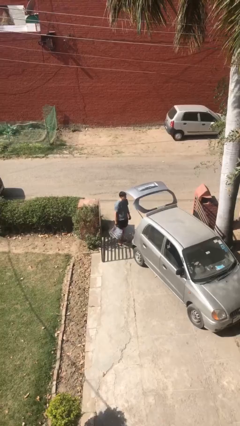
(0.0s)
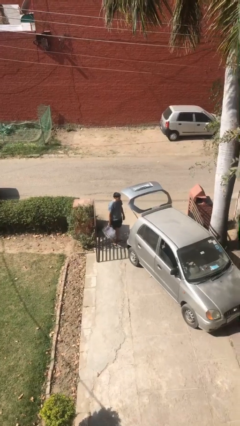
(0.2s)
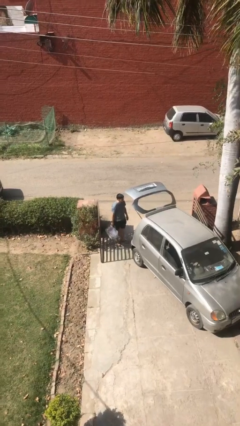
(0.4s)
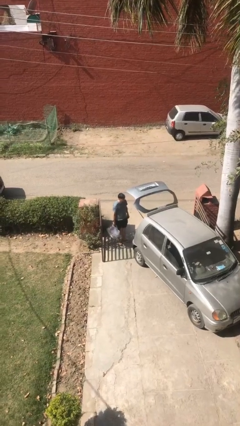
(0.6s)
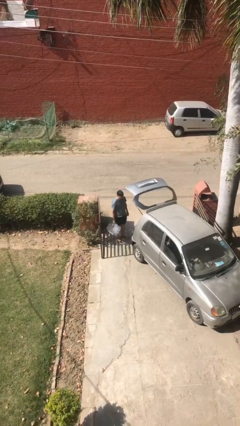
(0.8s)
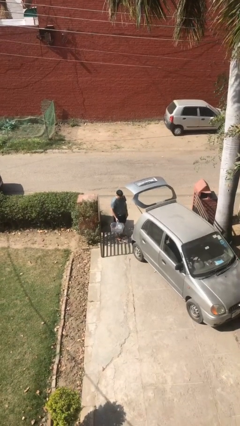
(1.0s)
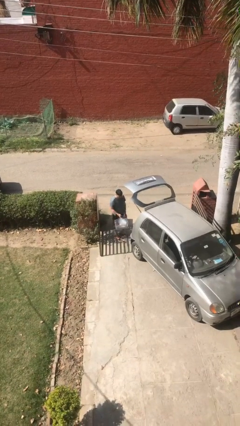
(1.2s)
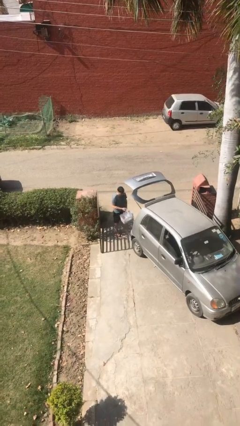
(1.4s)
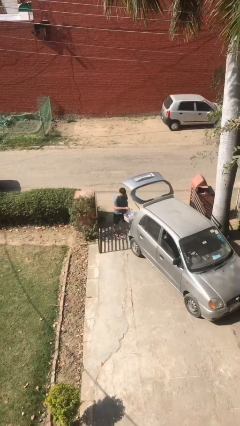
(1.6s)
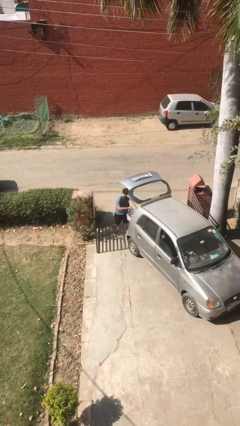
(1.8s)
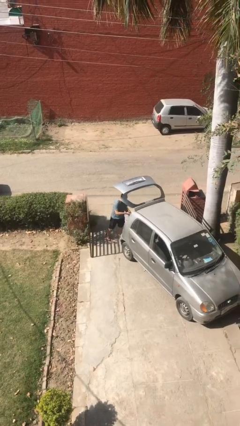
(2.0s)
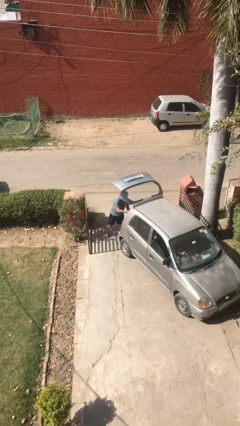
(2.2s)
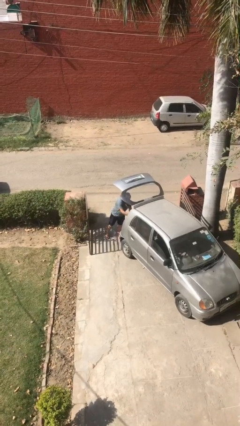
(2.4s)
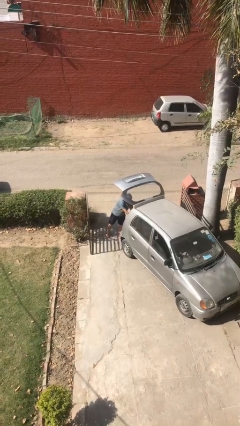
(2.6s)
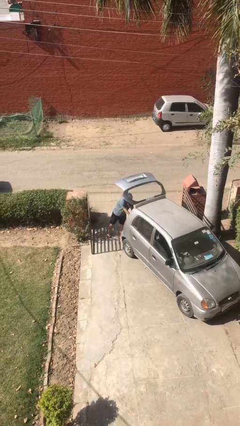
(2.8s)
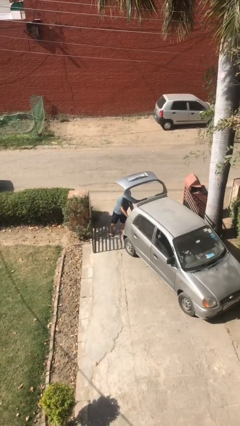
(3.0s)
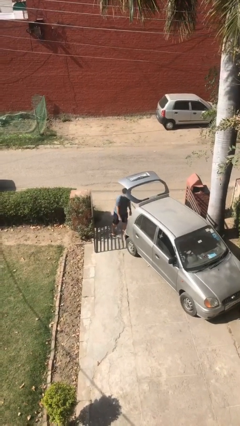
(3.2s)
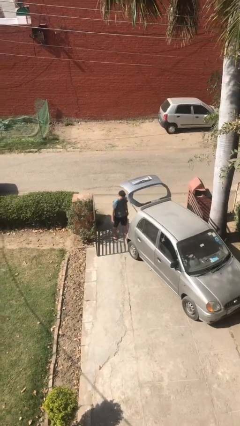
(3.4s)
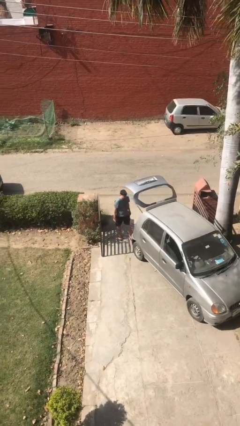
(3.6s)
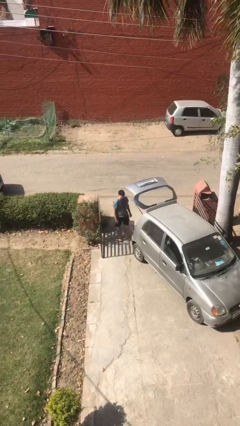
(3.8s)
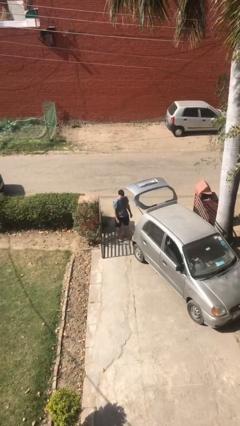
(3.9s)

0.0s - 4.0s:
person loads car

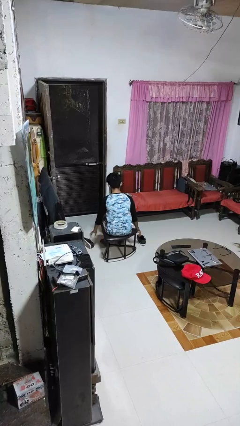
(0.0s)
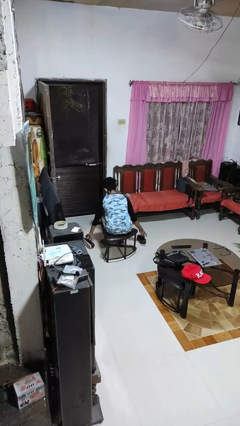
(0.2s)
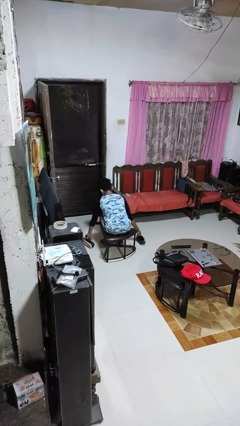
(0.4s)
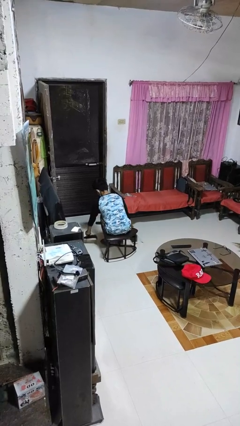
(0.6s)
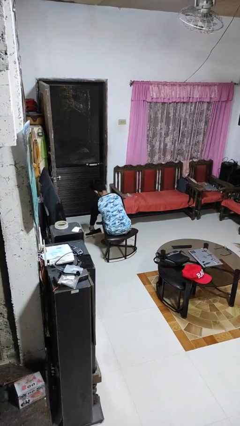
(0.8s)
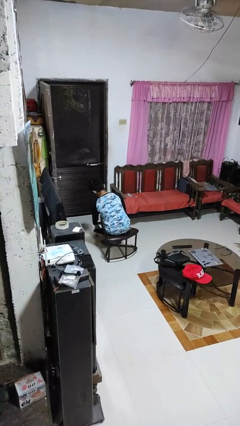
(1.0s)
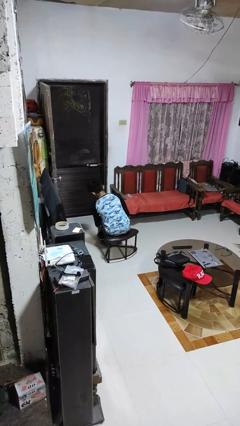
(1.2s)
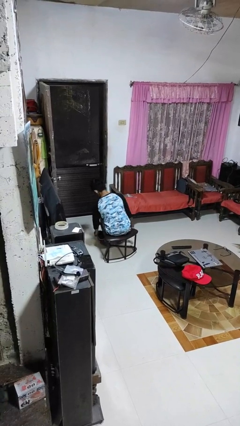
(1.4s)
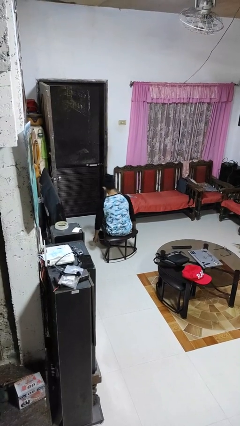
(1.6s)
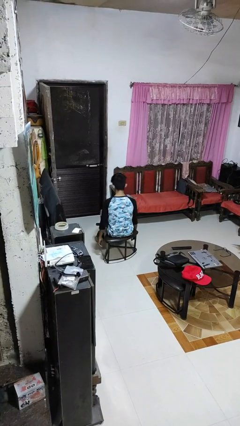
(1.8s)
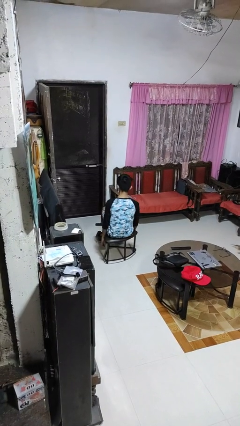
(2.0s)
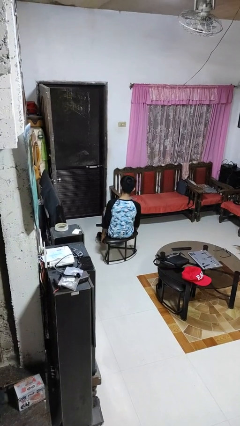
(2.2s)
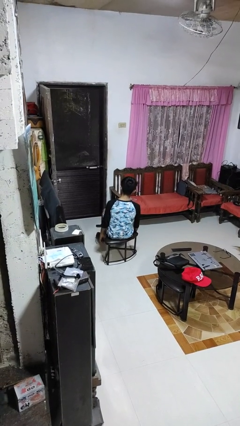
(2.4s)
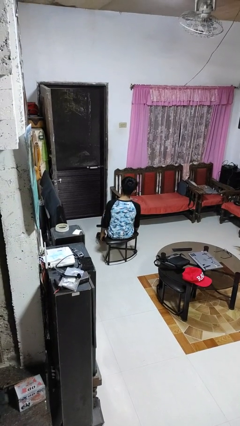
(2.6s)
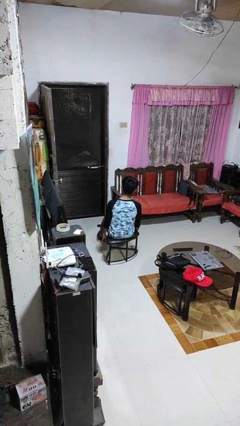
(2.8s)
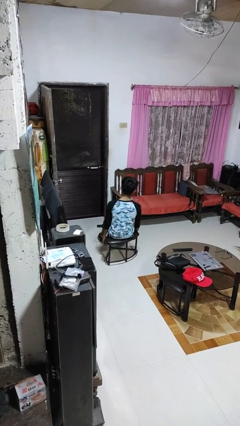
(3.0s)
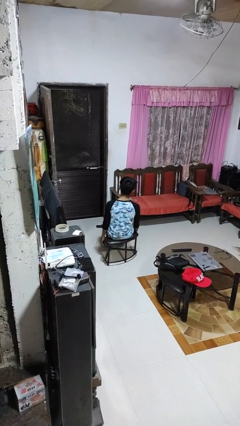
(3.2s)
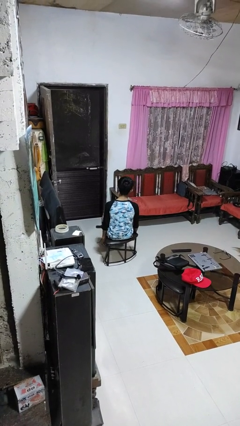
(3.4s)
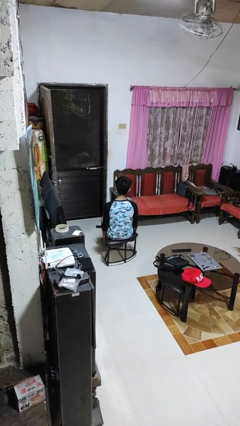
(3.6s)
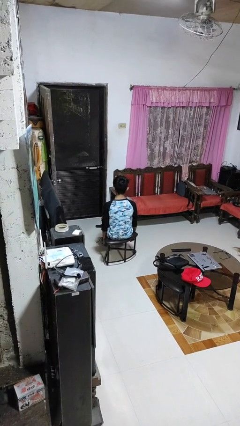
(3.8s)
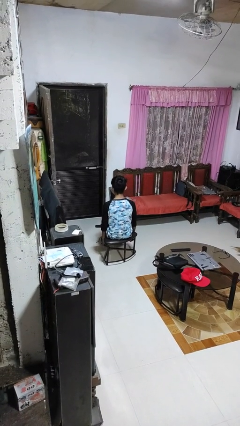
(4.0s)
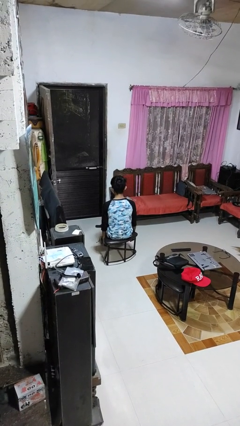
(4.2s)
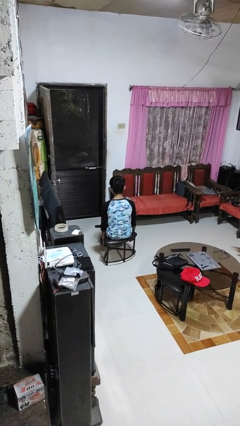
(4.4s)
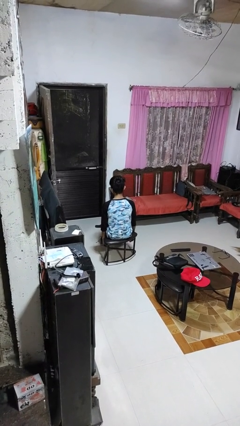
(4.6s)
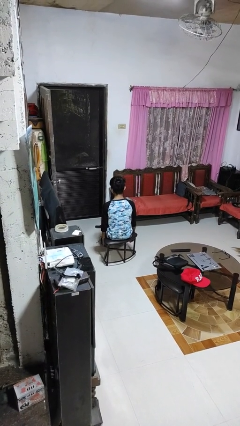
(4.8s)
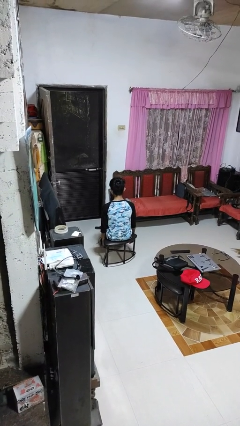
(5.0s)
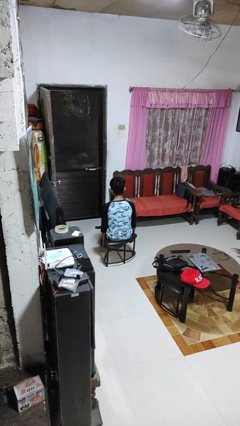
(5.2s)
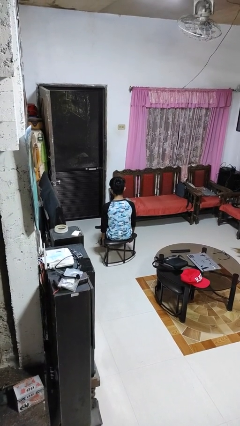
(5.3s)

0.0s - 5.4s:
person puts on shoes

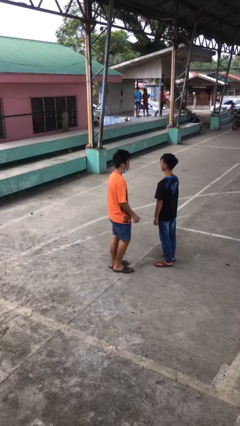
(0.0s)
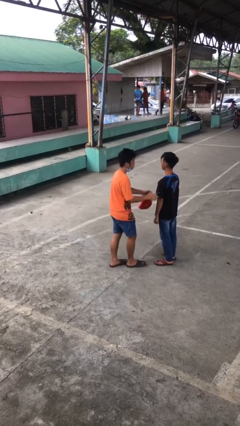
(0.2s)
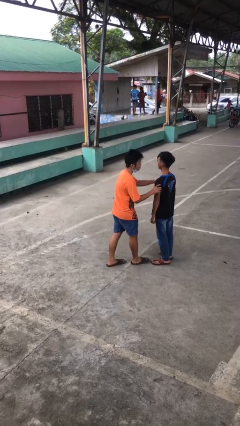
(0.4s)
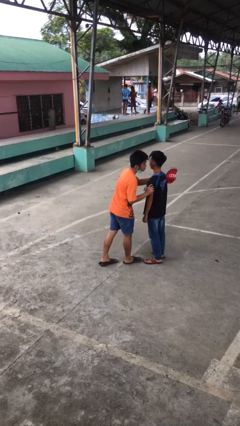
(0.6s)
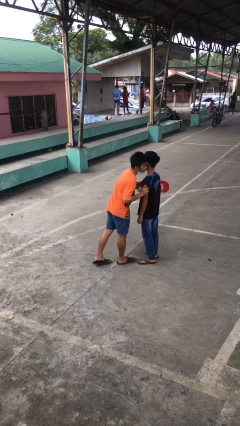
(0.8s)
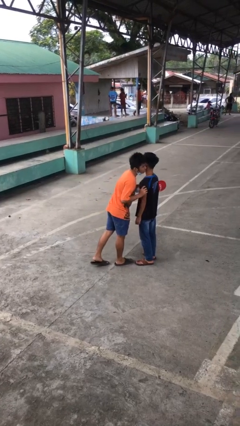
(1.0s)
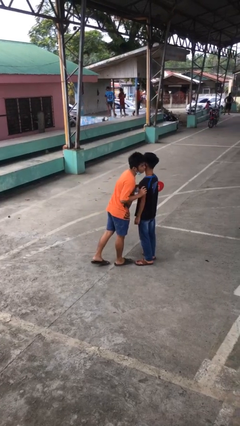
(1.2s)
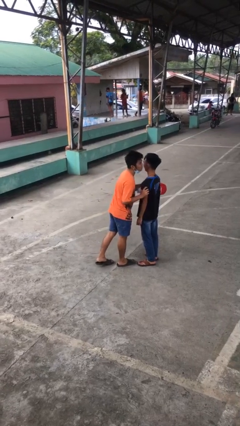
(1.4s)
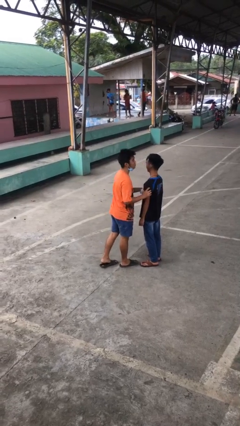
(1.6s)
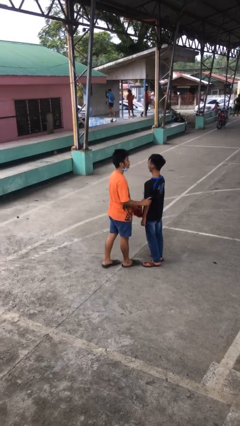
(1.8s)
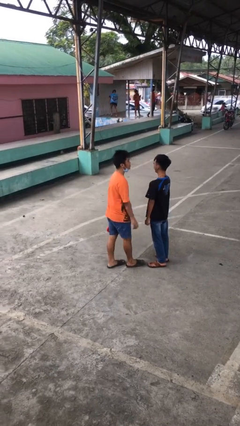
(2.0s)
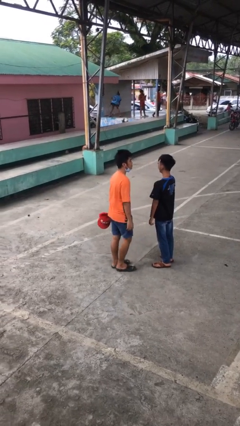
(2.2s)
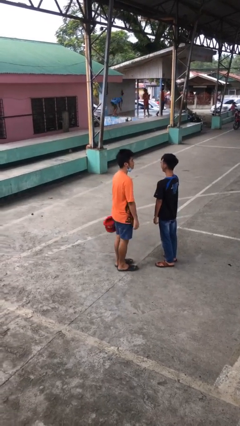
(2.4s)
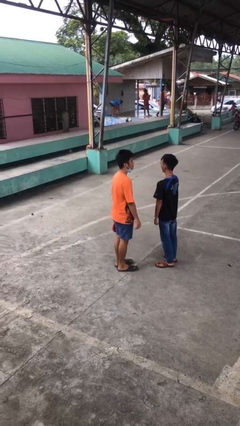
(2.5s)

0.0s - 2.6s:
person kisses cheek of person

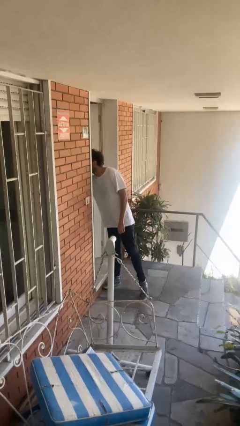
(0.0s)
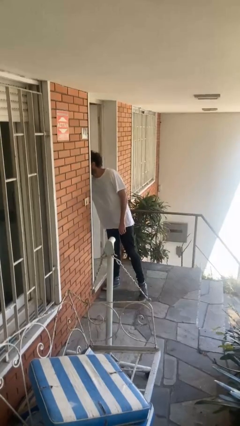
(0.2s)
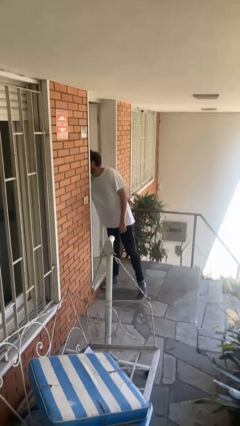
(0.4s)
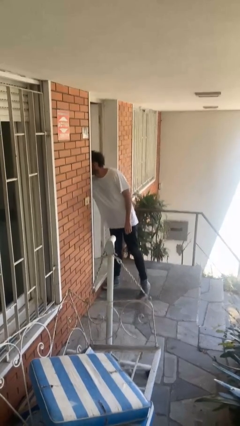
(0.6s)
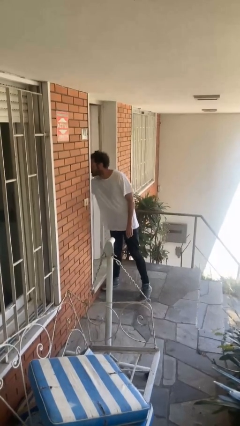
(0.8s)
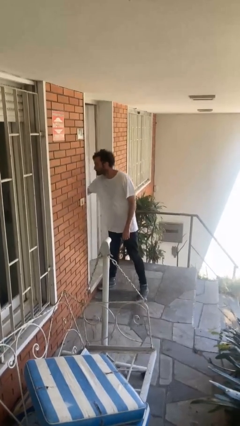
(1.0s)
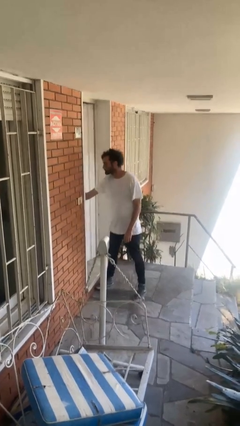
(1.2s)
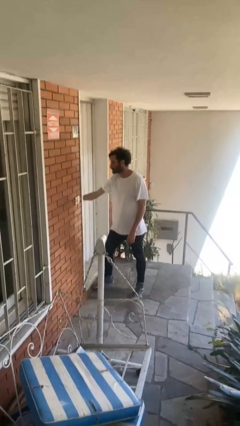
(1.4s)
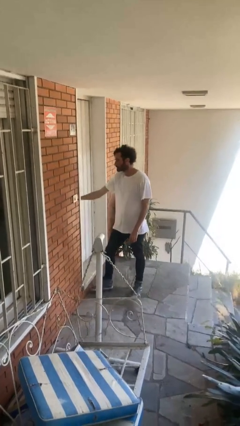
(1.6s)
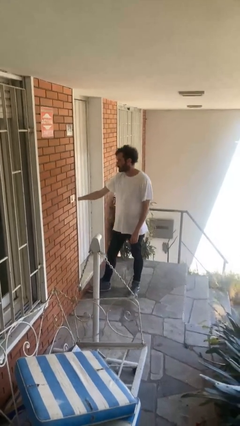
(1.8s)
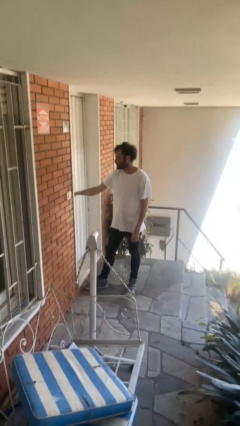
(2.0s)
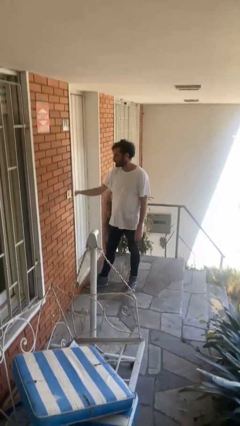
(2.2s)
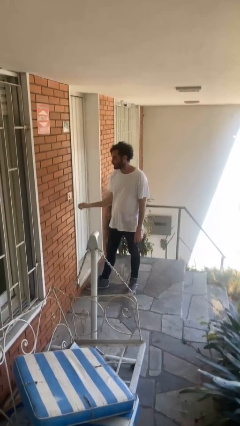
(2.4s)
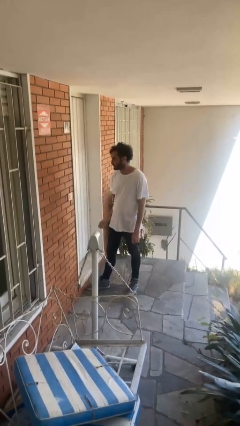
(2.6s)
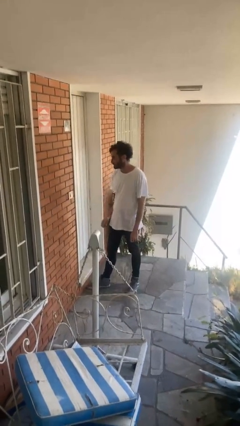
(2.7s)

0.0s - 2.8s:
person closes facility door

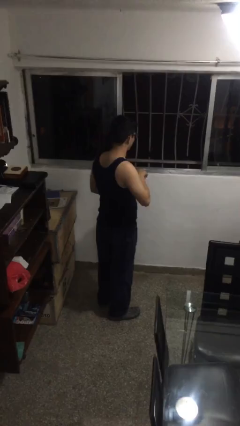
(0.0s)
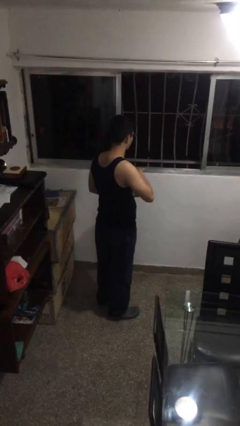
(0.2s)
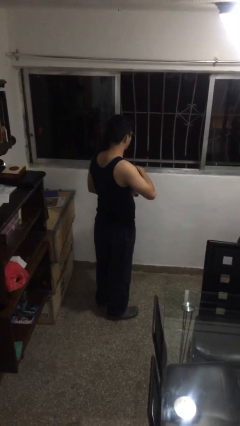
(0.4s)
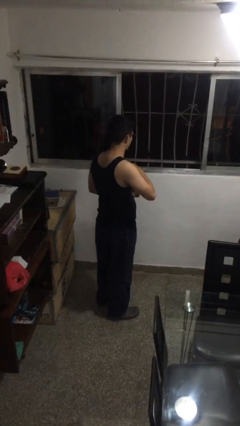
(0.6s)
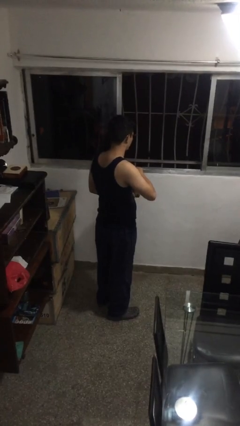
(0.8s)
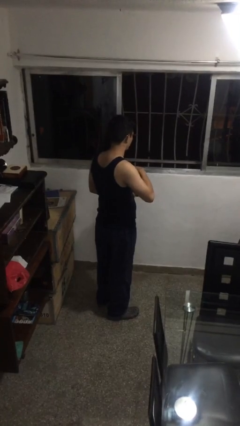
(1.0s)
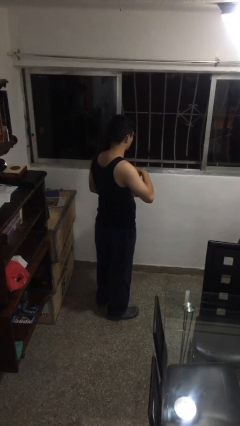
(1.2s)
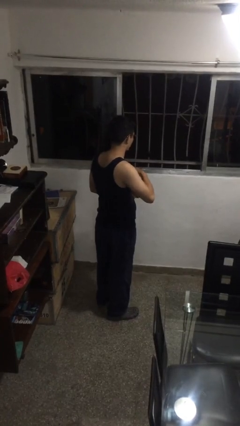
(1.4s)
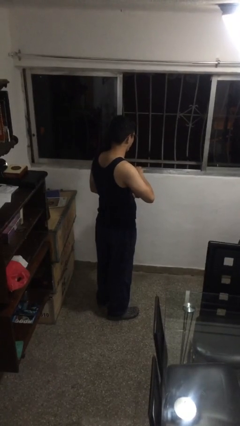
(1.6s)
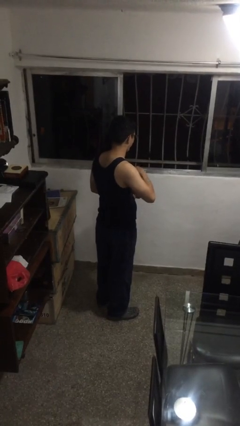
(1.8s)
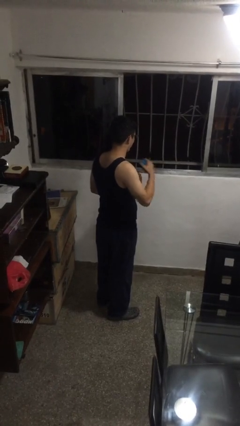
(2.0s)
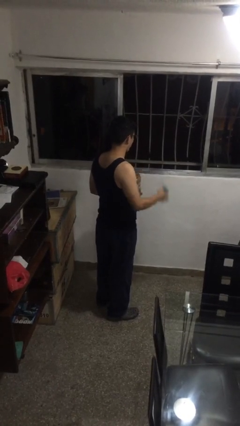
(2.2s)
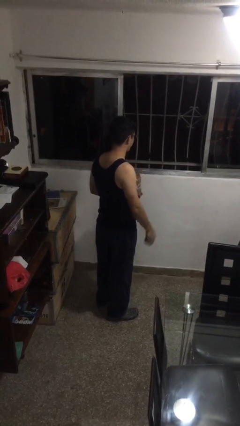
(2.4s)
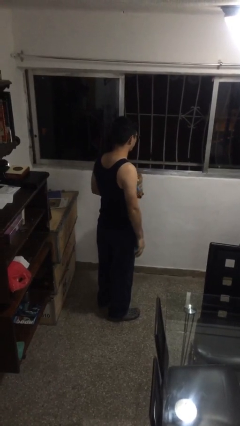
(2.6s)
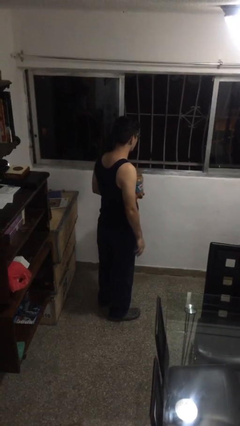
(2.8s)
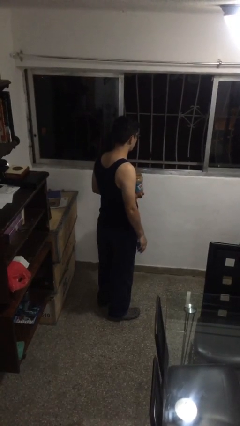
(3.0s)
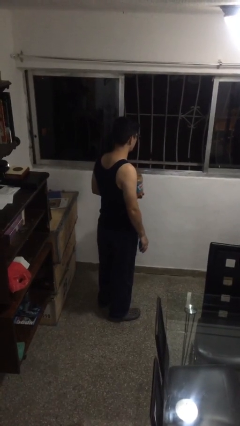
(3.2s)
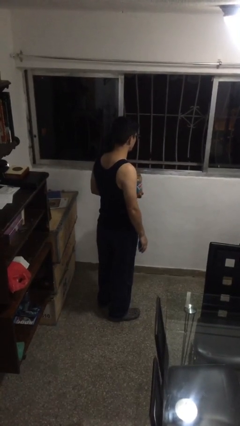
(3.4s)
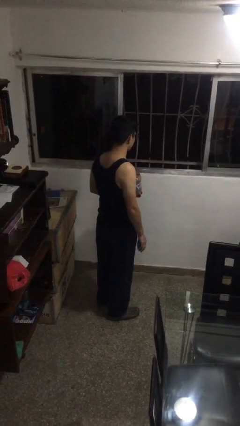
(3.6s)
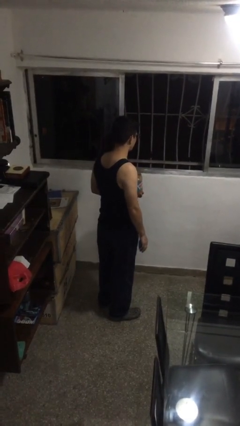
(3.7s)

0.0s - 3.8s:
person opens jar
